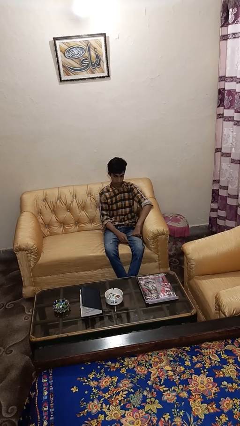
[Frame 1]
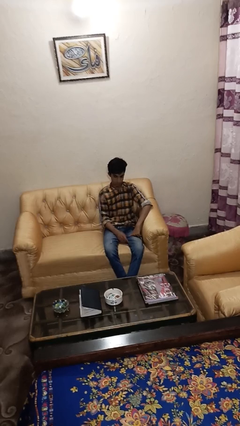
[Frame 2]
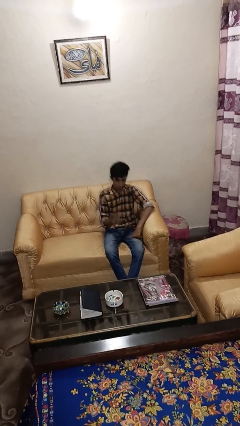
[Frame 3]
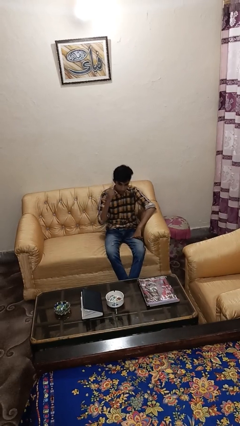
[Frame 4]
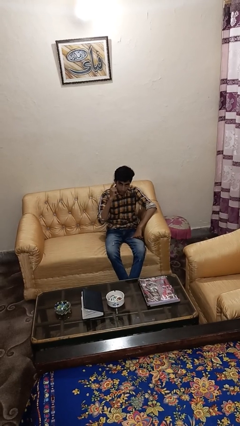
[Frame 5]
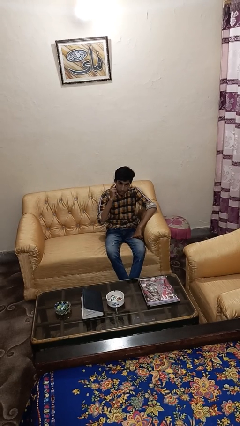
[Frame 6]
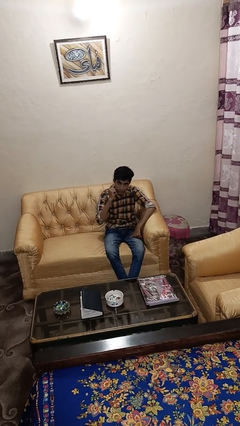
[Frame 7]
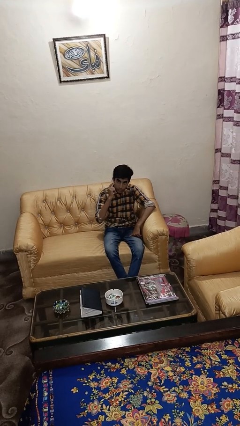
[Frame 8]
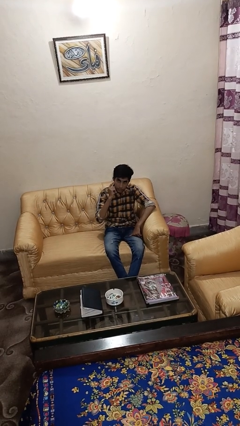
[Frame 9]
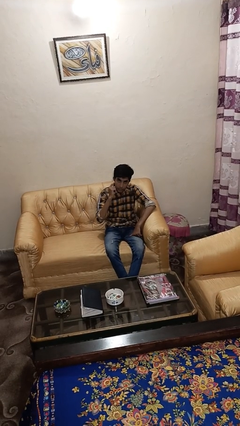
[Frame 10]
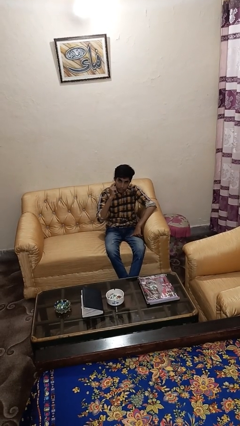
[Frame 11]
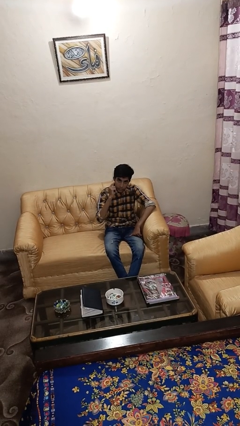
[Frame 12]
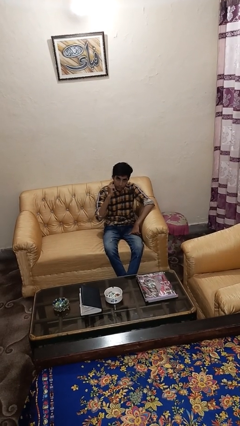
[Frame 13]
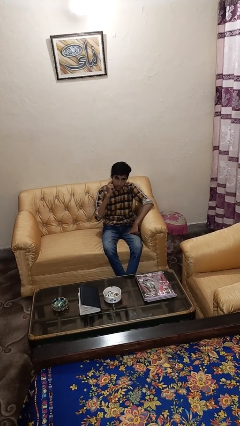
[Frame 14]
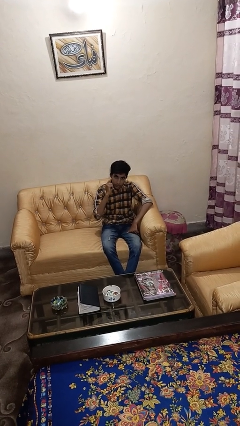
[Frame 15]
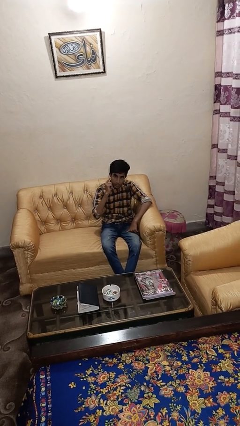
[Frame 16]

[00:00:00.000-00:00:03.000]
person gestures listen closely

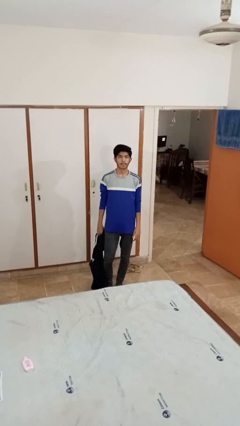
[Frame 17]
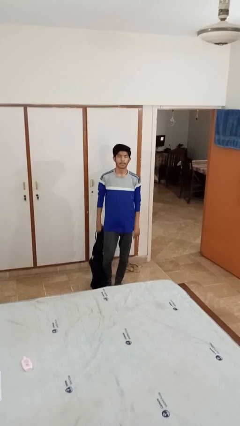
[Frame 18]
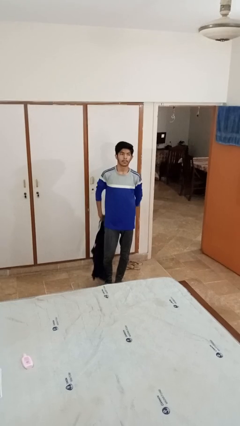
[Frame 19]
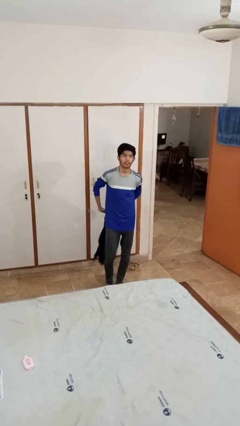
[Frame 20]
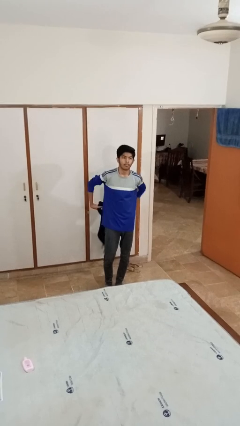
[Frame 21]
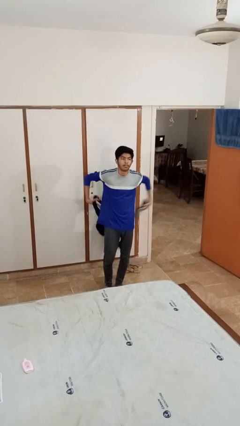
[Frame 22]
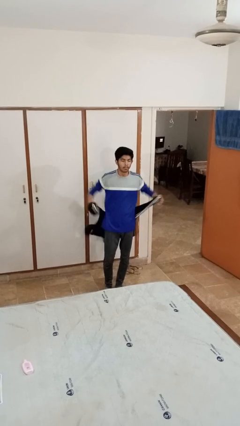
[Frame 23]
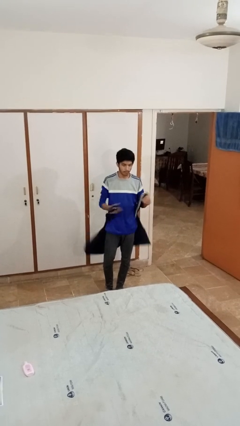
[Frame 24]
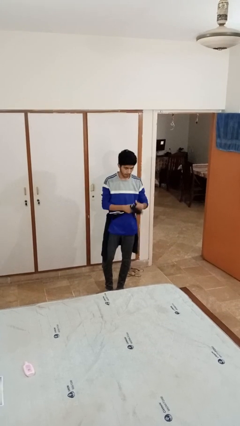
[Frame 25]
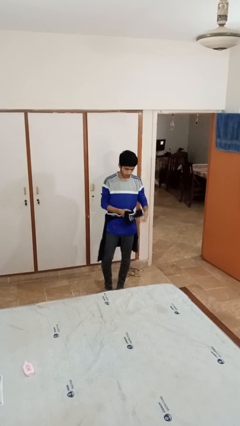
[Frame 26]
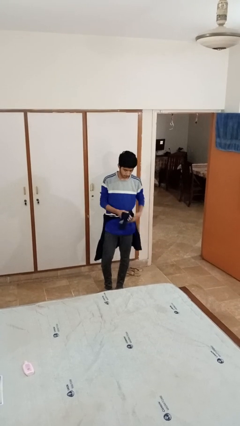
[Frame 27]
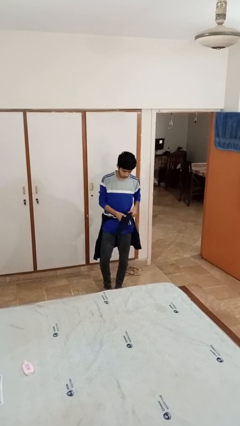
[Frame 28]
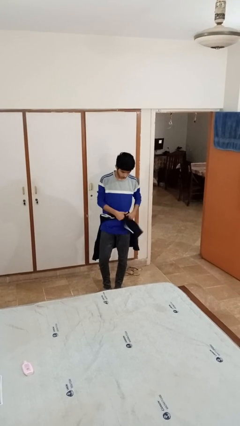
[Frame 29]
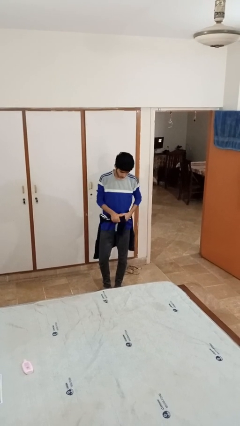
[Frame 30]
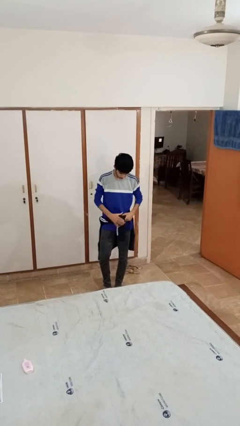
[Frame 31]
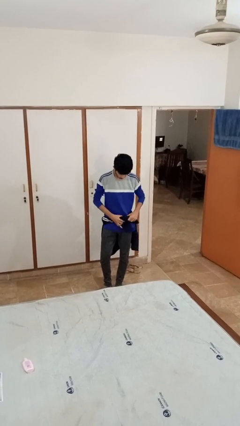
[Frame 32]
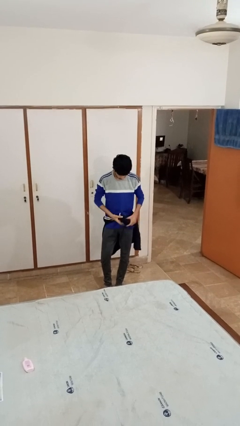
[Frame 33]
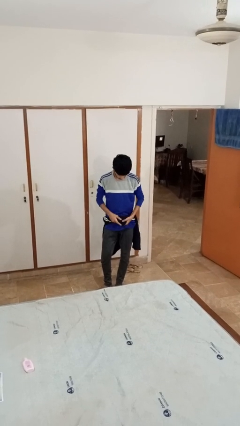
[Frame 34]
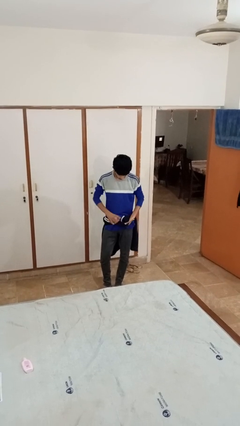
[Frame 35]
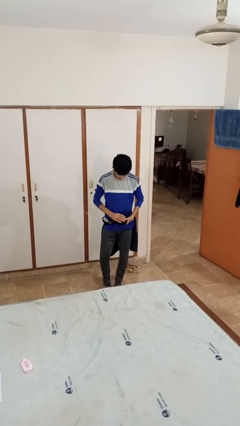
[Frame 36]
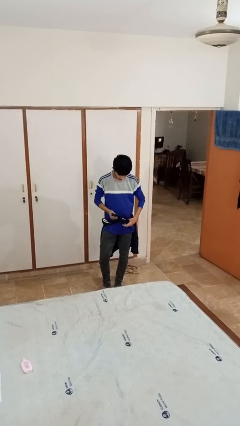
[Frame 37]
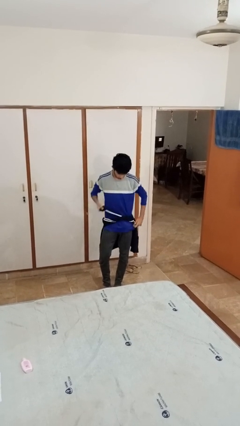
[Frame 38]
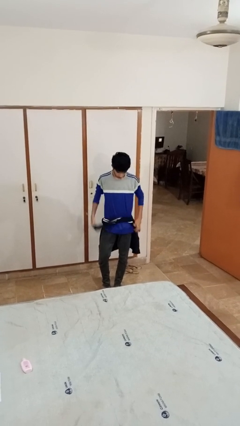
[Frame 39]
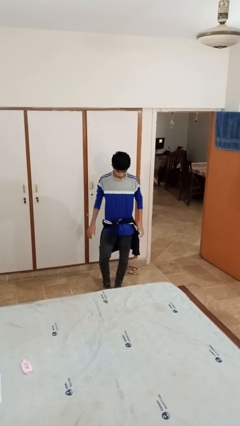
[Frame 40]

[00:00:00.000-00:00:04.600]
person ties jacket around waist

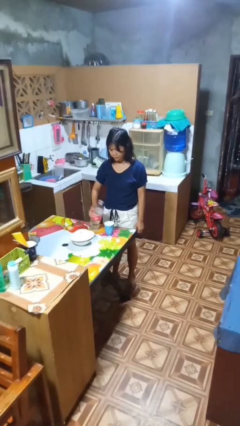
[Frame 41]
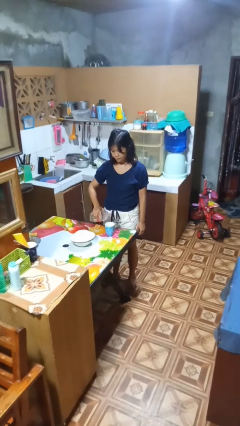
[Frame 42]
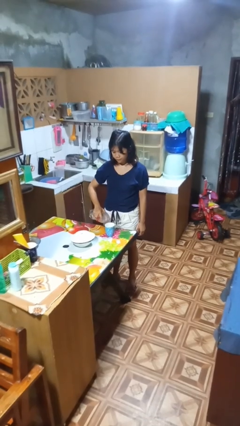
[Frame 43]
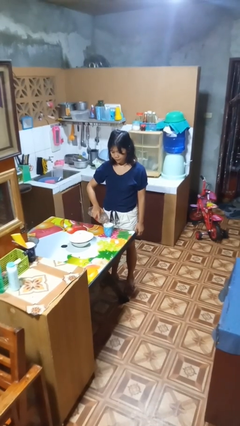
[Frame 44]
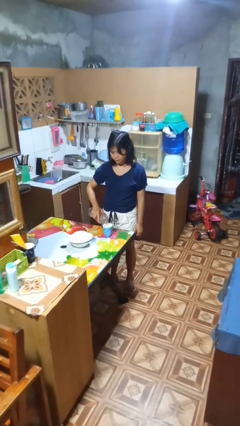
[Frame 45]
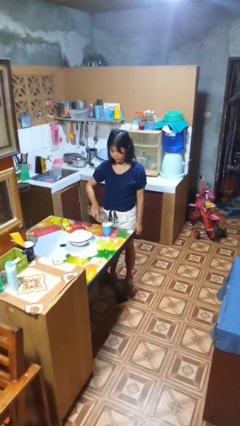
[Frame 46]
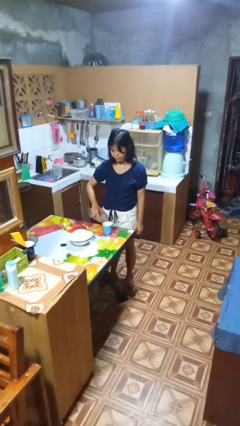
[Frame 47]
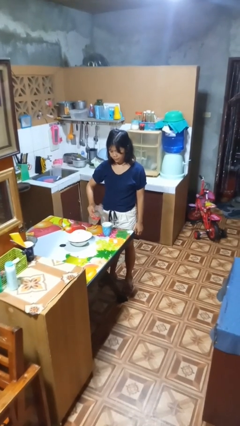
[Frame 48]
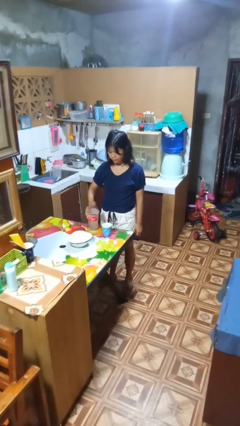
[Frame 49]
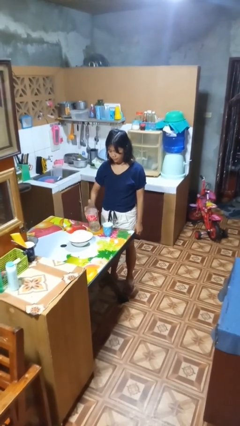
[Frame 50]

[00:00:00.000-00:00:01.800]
person pours liquid into cup

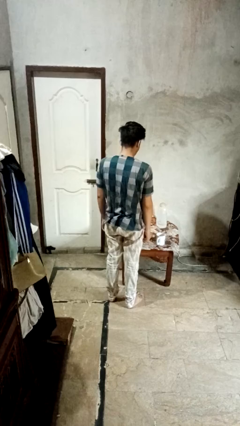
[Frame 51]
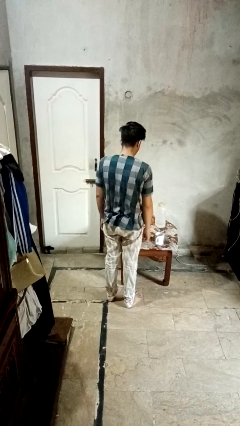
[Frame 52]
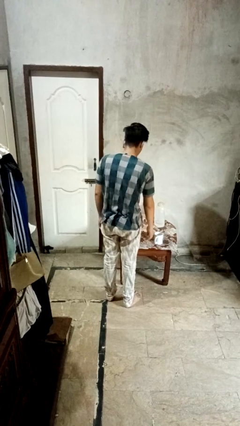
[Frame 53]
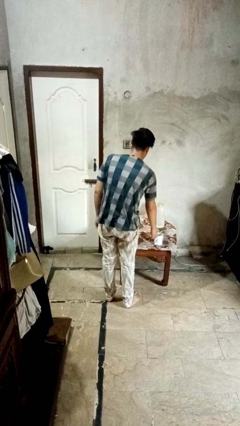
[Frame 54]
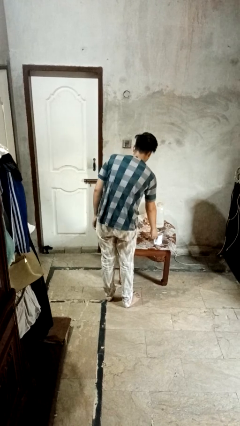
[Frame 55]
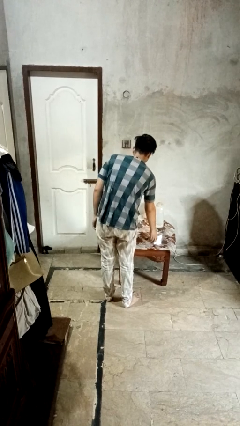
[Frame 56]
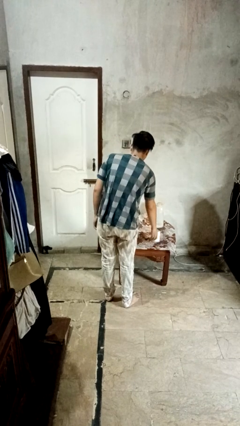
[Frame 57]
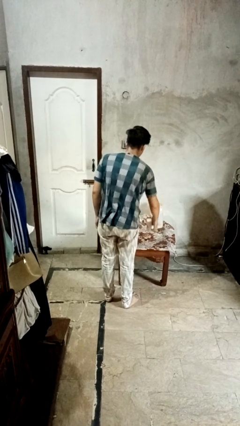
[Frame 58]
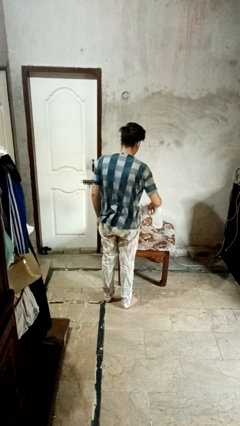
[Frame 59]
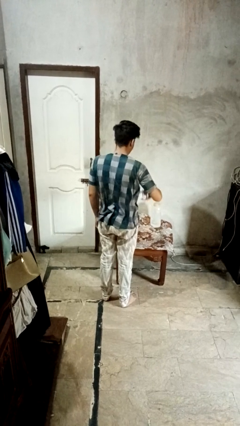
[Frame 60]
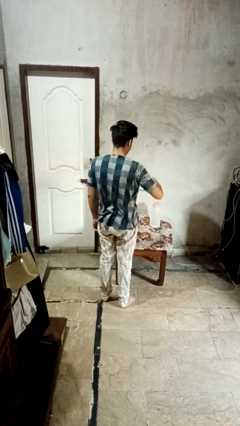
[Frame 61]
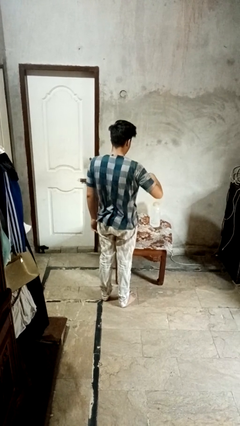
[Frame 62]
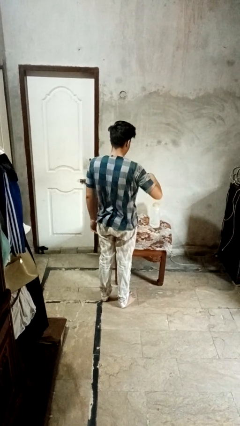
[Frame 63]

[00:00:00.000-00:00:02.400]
person picks up object from table

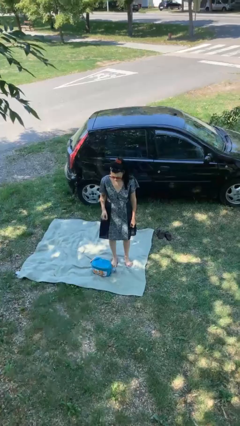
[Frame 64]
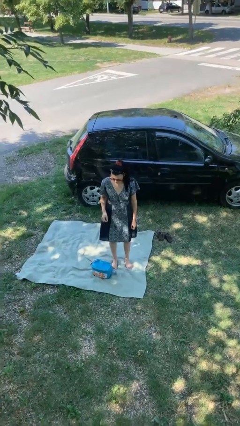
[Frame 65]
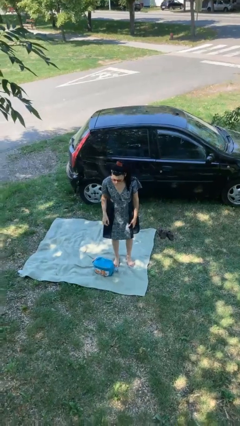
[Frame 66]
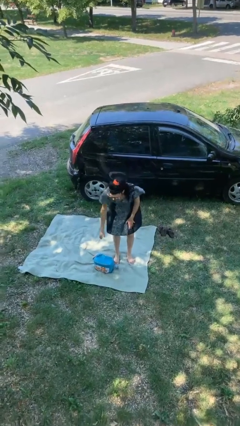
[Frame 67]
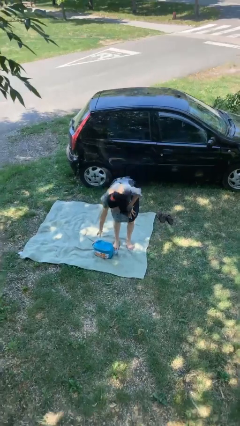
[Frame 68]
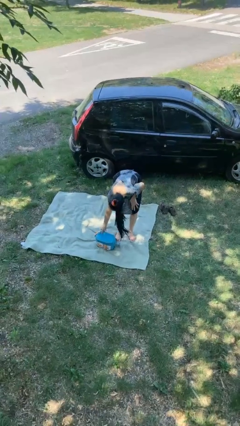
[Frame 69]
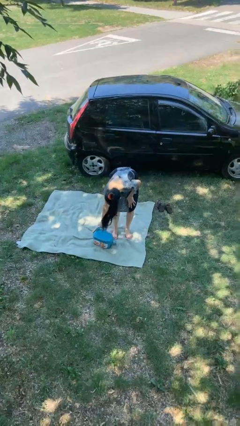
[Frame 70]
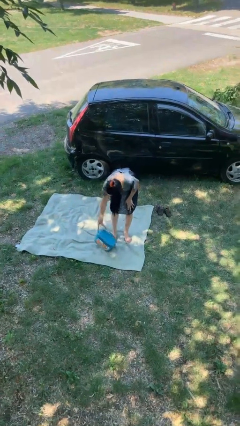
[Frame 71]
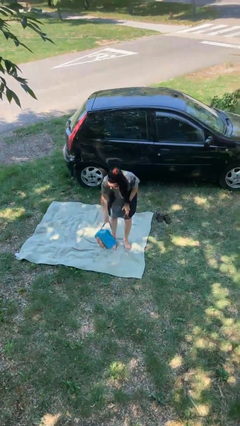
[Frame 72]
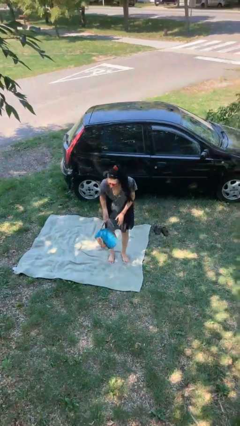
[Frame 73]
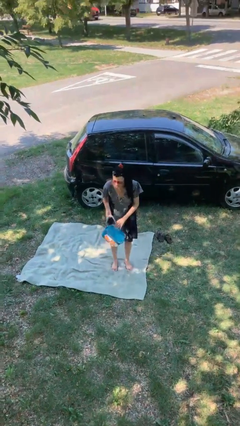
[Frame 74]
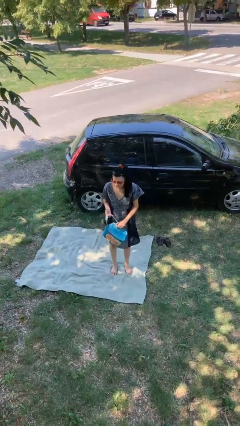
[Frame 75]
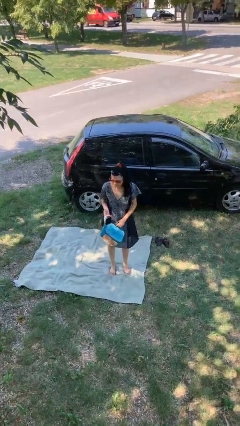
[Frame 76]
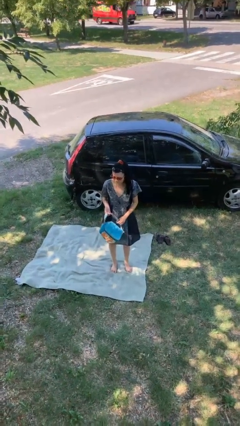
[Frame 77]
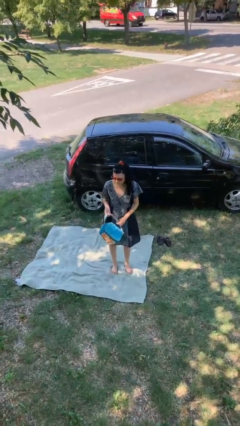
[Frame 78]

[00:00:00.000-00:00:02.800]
person picks up object from floor

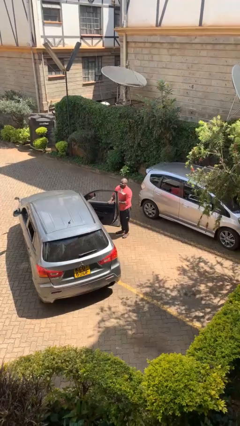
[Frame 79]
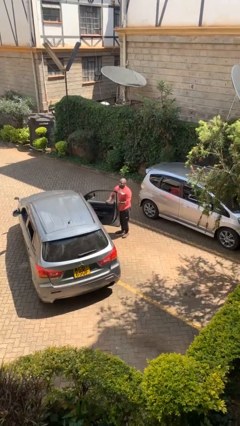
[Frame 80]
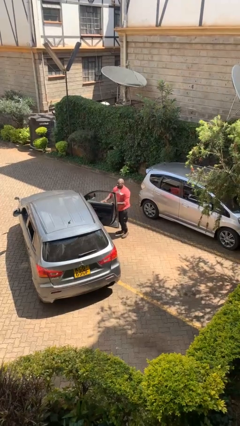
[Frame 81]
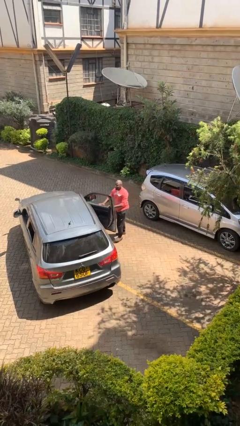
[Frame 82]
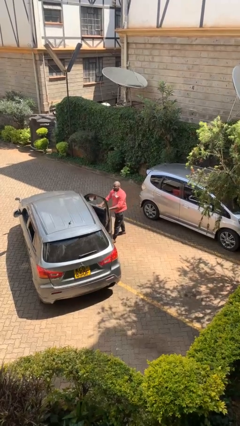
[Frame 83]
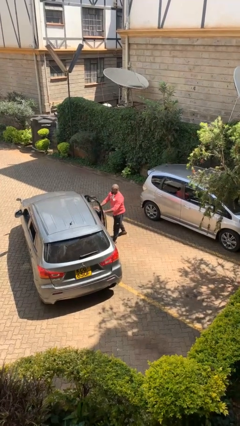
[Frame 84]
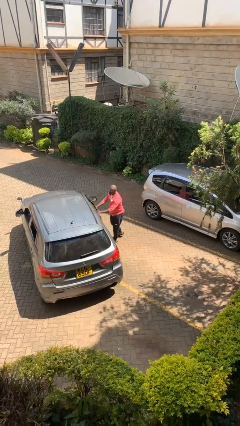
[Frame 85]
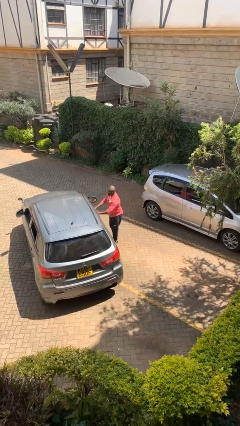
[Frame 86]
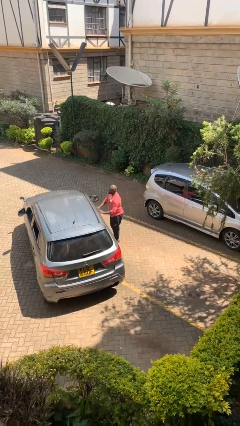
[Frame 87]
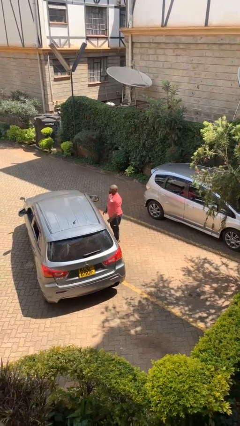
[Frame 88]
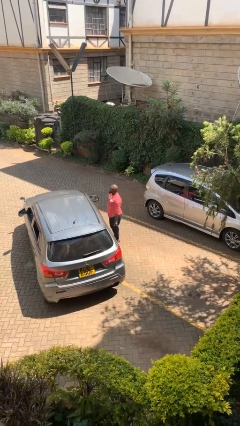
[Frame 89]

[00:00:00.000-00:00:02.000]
person closes car door
